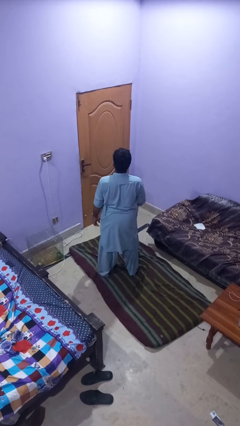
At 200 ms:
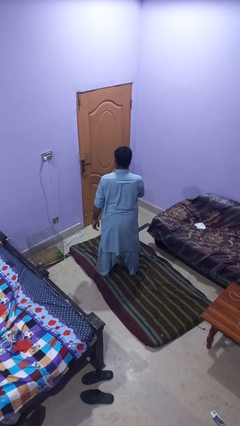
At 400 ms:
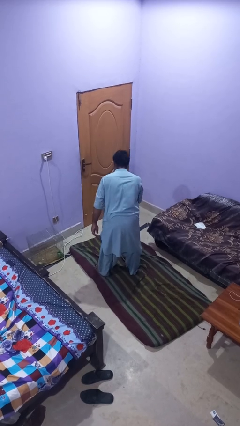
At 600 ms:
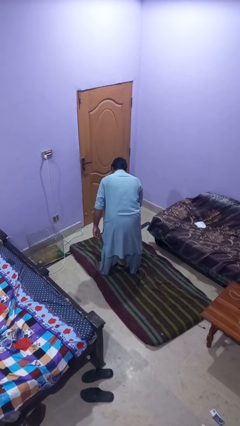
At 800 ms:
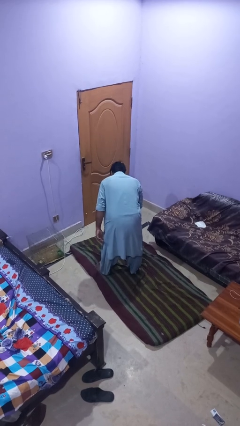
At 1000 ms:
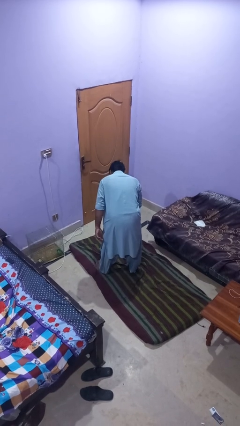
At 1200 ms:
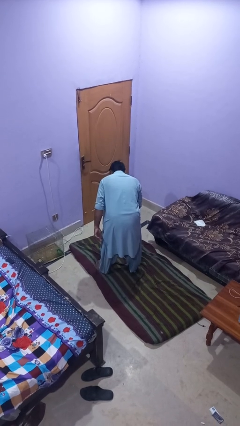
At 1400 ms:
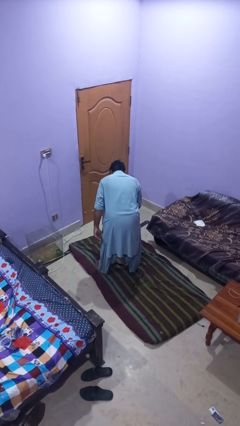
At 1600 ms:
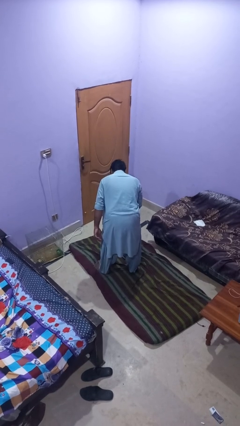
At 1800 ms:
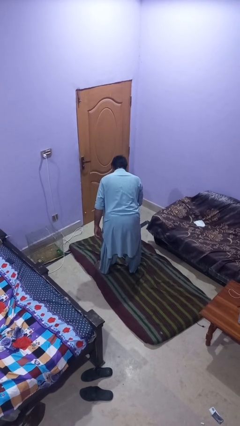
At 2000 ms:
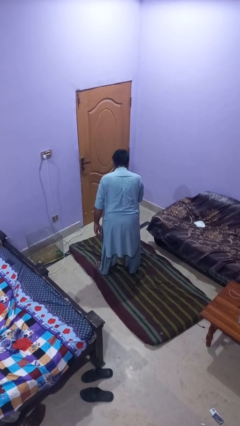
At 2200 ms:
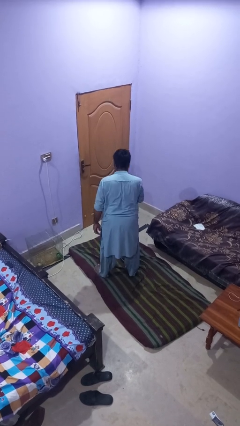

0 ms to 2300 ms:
person bows

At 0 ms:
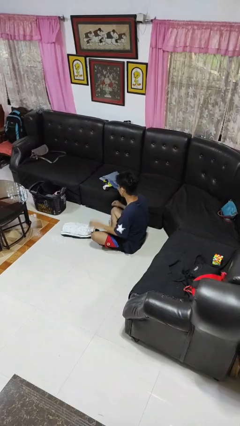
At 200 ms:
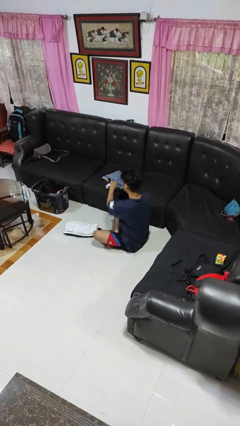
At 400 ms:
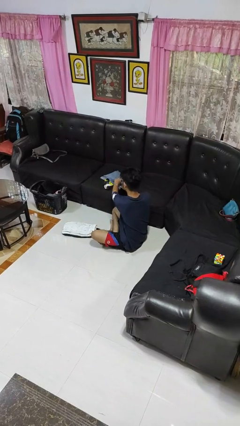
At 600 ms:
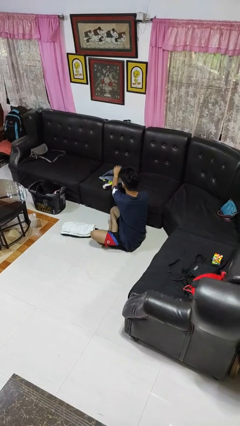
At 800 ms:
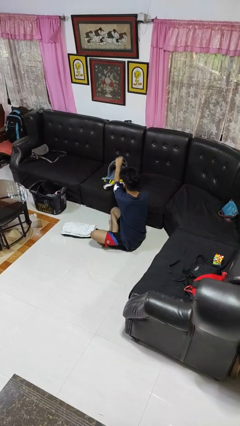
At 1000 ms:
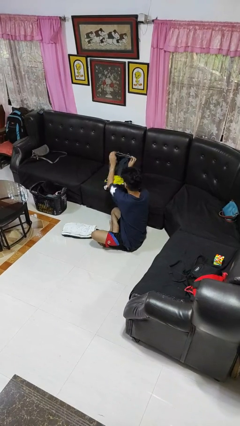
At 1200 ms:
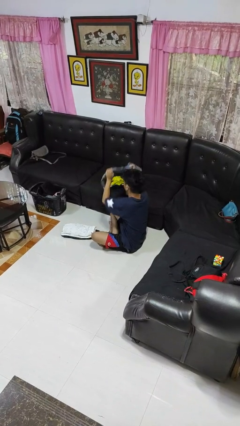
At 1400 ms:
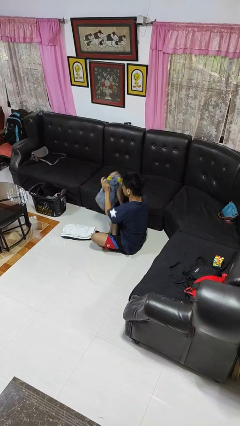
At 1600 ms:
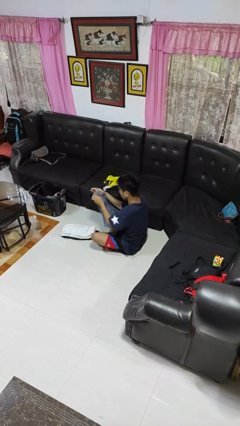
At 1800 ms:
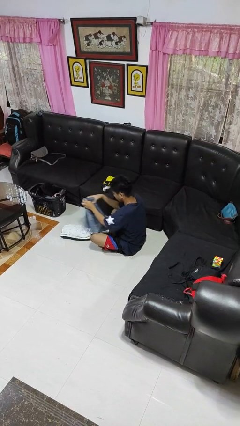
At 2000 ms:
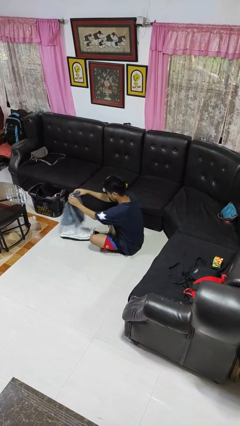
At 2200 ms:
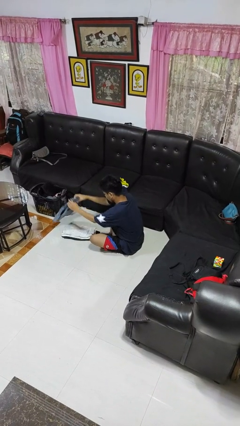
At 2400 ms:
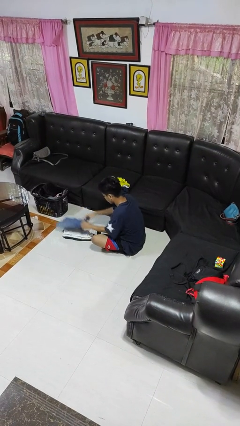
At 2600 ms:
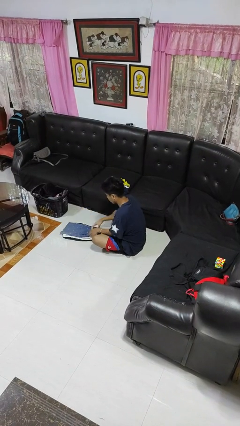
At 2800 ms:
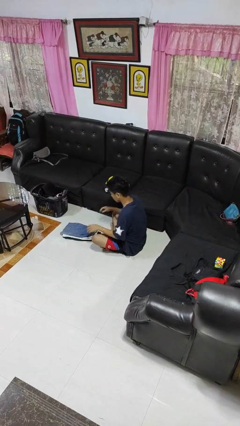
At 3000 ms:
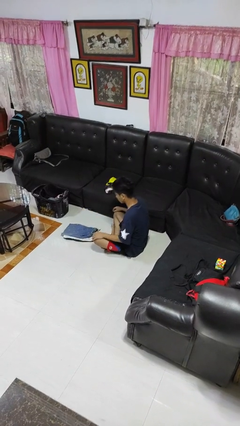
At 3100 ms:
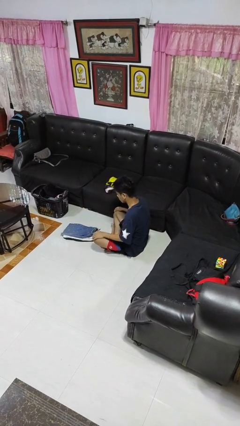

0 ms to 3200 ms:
person folds pants

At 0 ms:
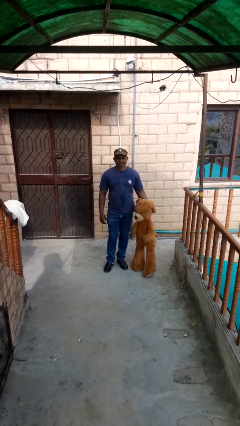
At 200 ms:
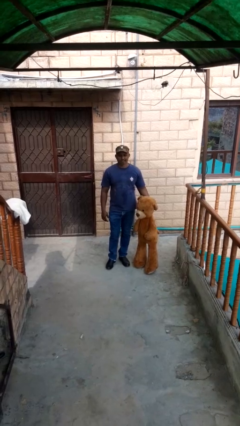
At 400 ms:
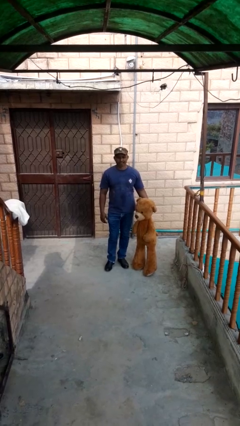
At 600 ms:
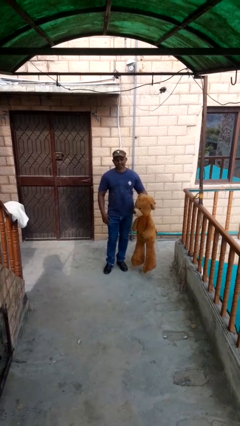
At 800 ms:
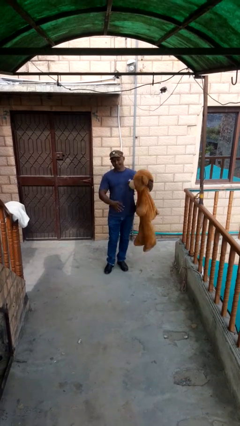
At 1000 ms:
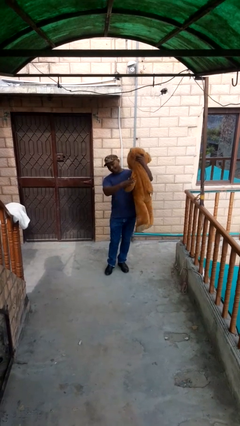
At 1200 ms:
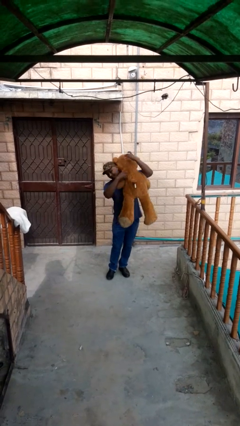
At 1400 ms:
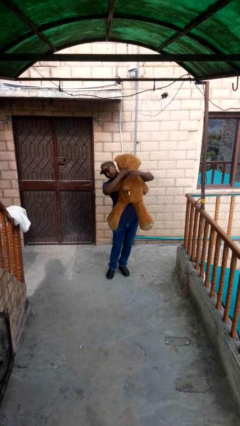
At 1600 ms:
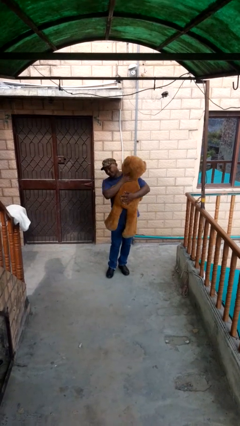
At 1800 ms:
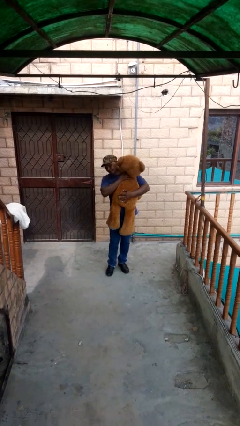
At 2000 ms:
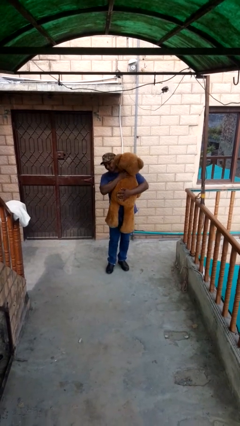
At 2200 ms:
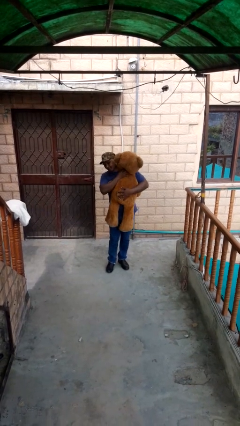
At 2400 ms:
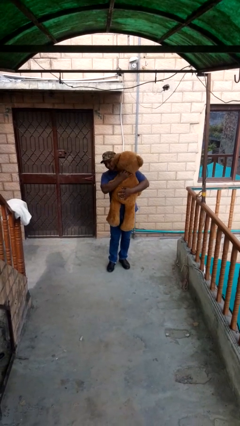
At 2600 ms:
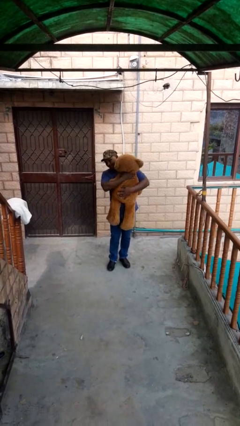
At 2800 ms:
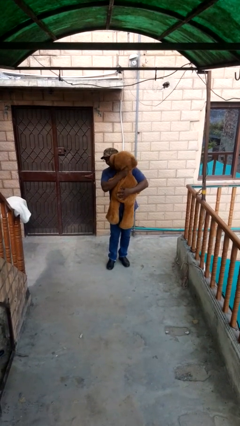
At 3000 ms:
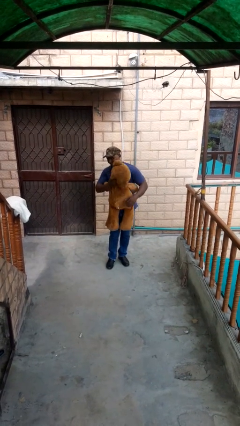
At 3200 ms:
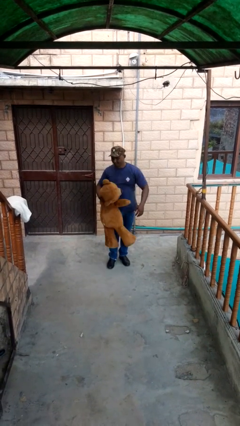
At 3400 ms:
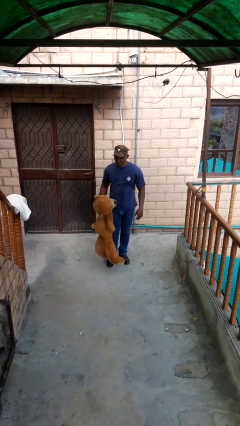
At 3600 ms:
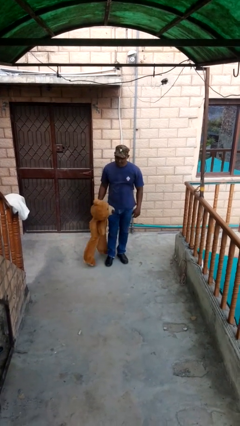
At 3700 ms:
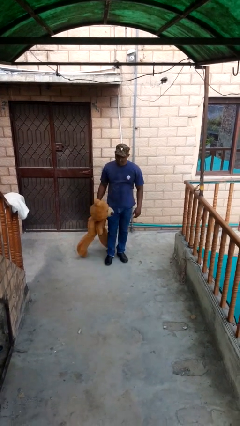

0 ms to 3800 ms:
person hugs stuffed animal

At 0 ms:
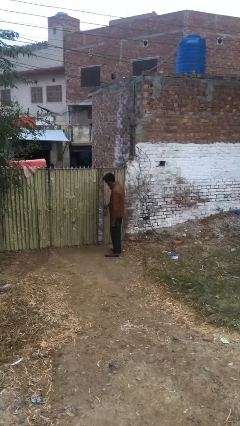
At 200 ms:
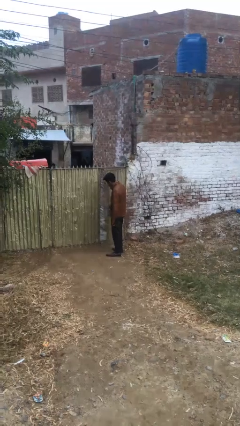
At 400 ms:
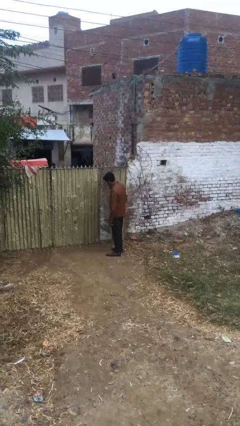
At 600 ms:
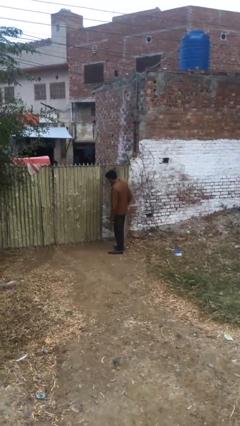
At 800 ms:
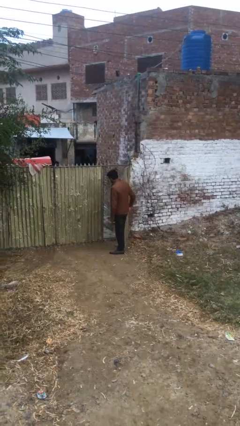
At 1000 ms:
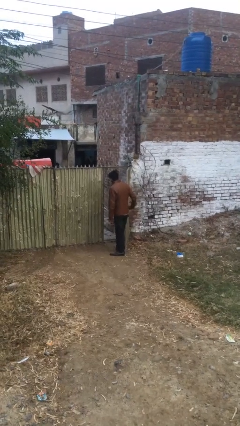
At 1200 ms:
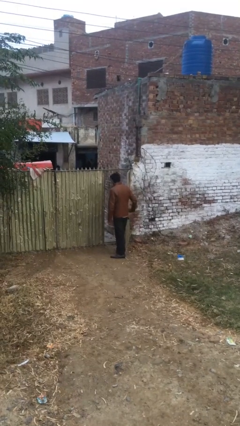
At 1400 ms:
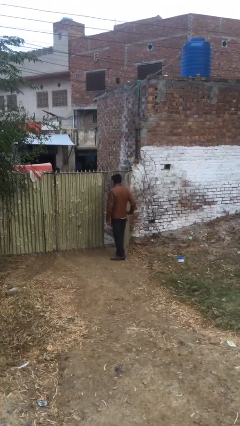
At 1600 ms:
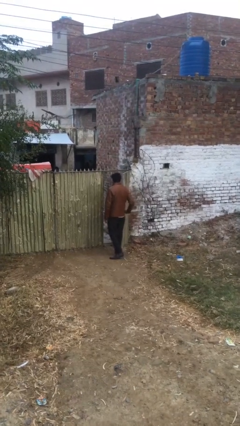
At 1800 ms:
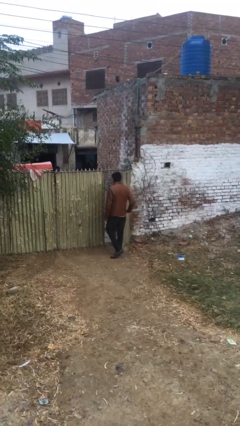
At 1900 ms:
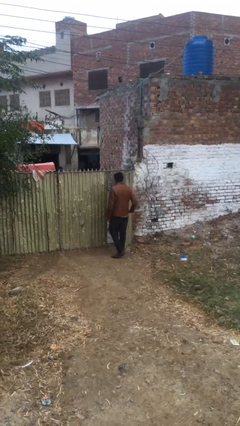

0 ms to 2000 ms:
person opens facility door

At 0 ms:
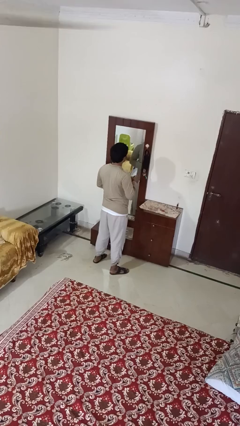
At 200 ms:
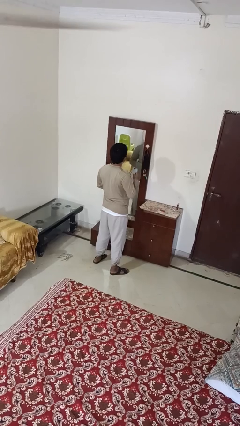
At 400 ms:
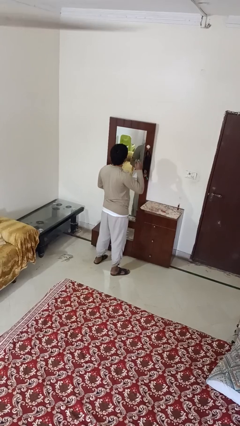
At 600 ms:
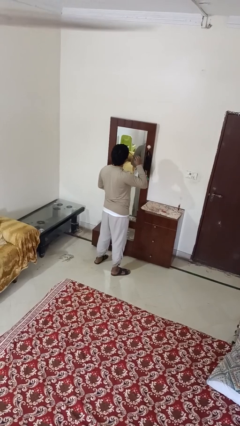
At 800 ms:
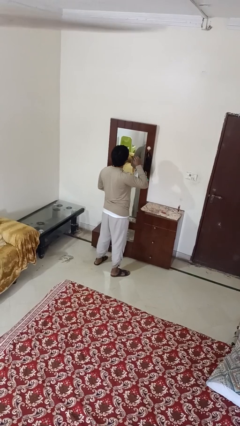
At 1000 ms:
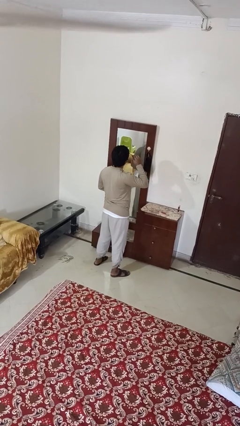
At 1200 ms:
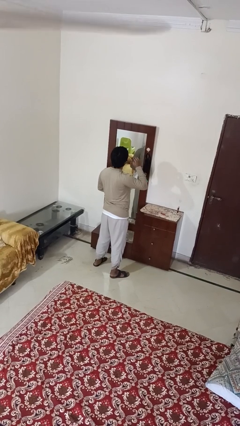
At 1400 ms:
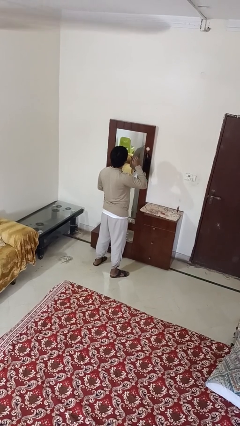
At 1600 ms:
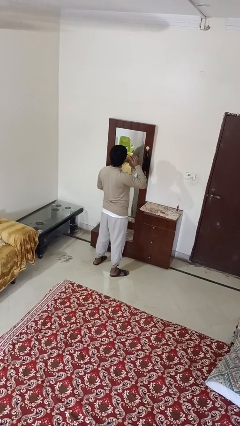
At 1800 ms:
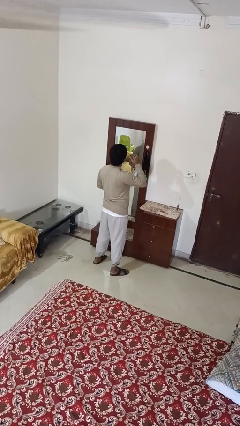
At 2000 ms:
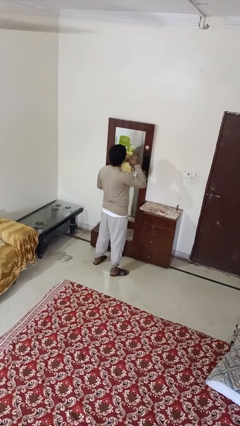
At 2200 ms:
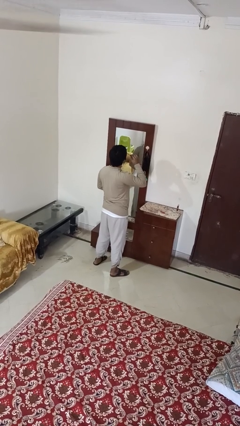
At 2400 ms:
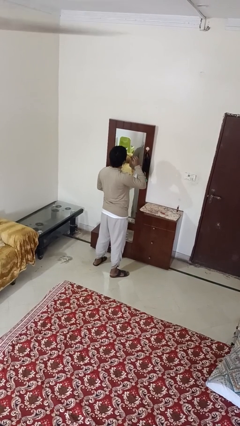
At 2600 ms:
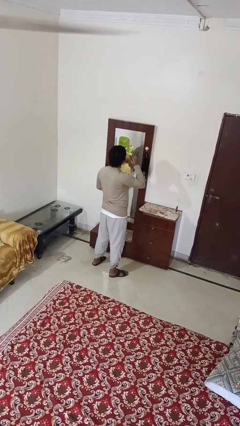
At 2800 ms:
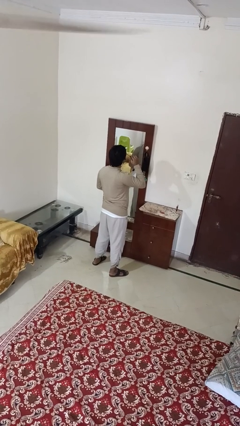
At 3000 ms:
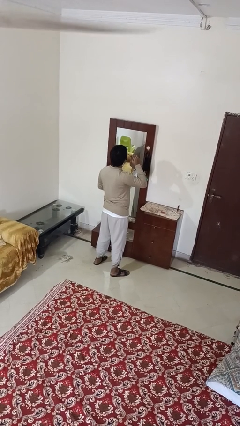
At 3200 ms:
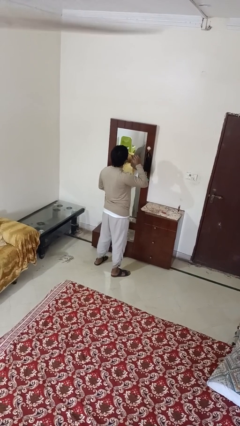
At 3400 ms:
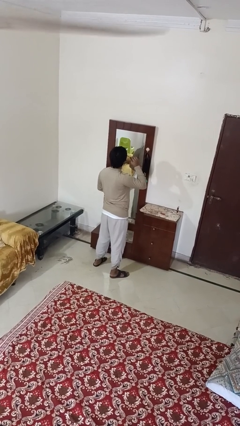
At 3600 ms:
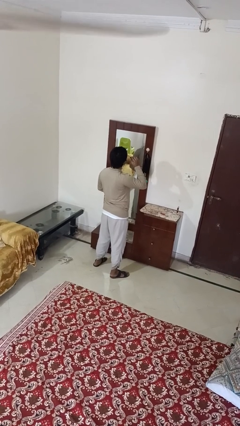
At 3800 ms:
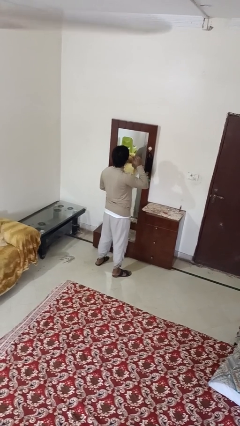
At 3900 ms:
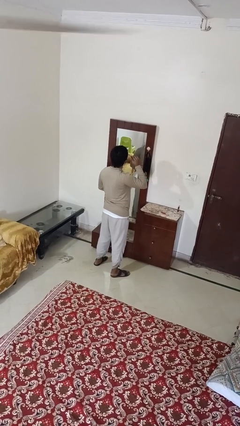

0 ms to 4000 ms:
person applies eye makeup

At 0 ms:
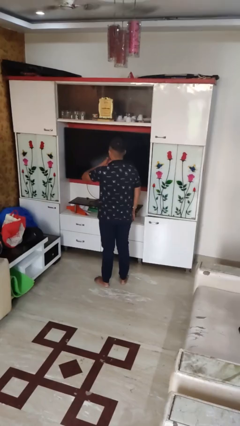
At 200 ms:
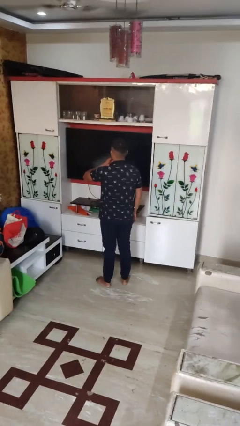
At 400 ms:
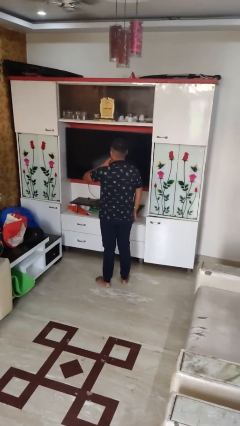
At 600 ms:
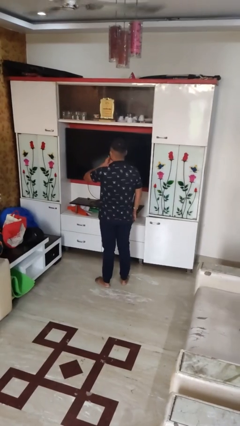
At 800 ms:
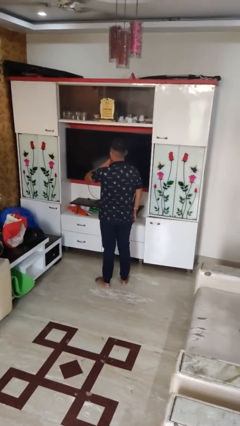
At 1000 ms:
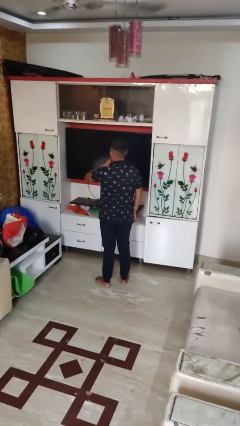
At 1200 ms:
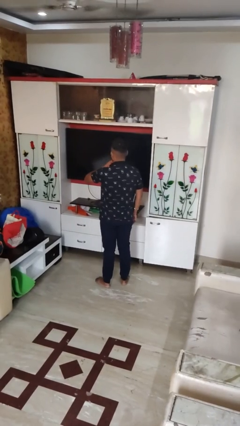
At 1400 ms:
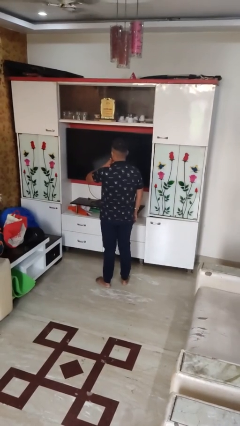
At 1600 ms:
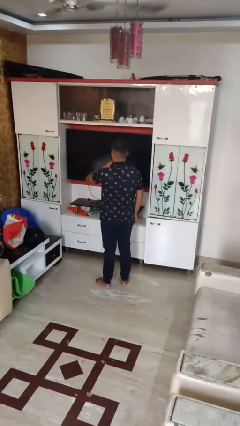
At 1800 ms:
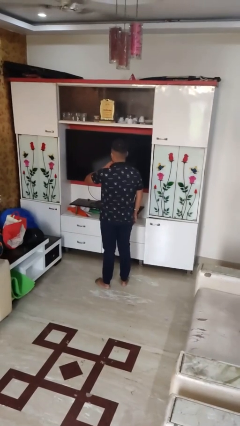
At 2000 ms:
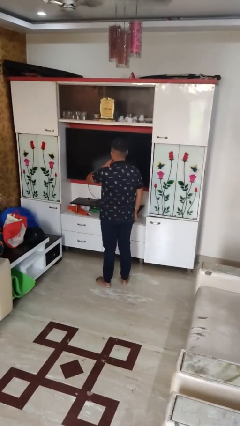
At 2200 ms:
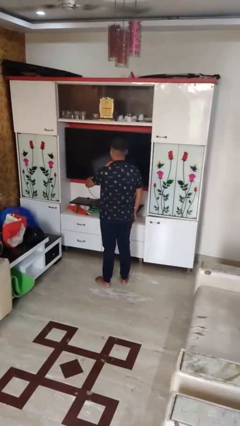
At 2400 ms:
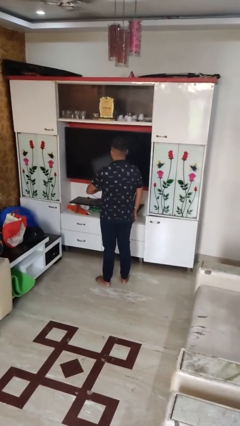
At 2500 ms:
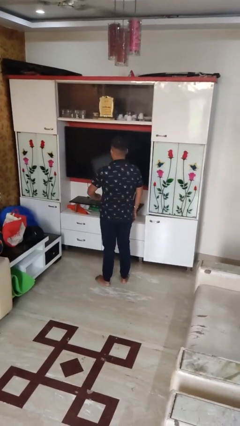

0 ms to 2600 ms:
person strokes chin
